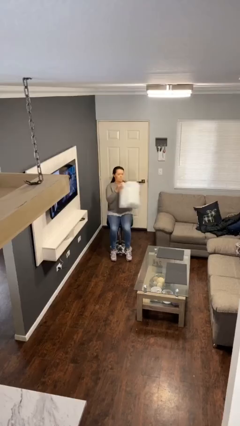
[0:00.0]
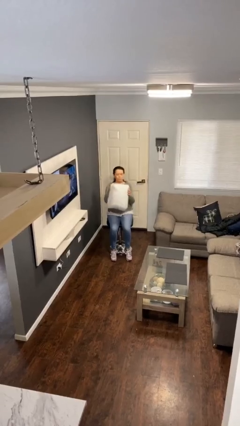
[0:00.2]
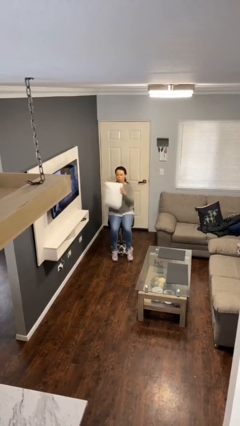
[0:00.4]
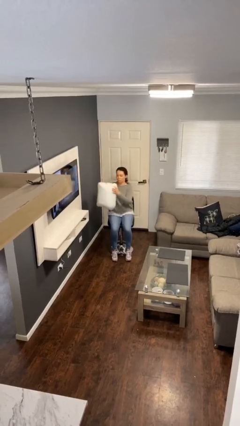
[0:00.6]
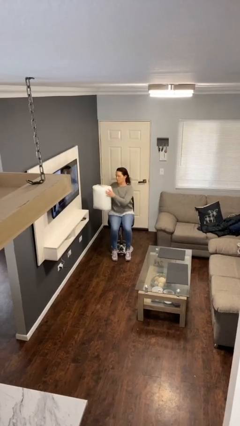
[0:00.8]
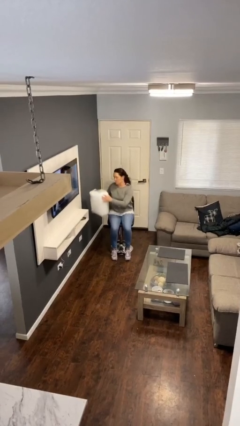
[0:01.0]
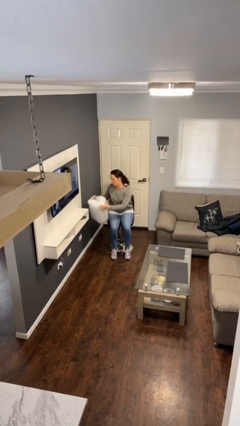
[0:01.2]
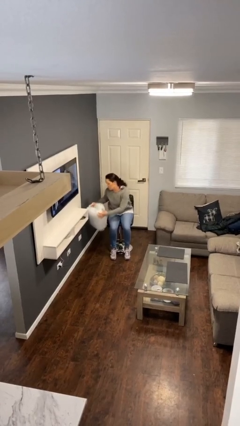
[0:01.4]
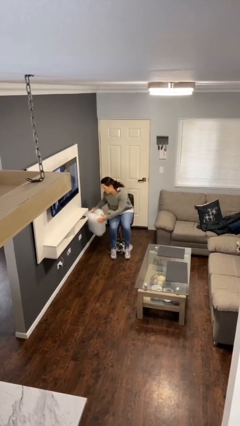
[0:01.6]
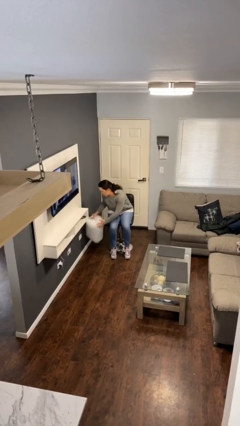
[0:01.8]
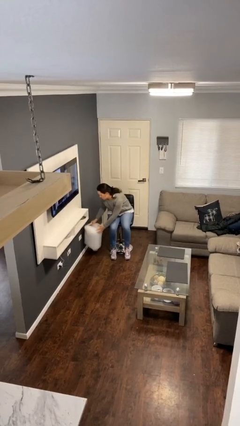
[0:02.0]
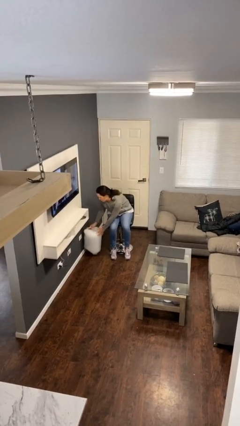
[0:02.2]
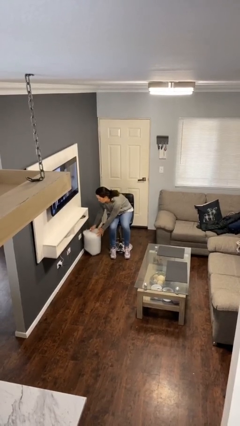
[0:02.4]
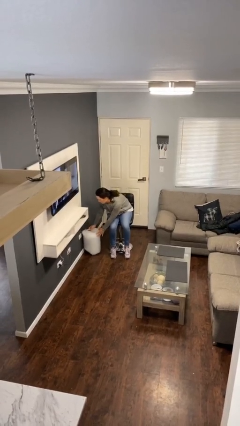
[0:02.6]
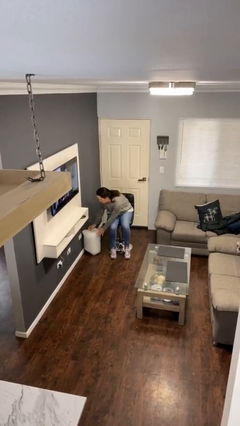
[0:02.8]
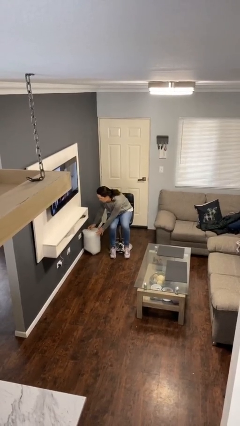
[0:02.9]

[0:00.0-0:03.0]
person puts down object on floor

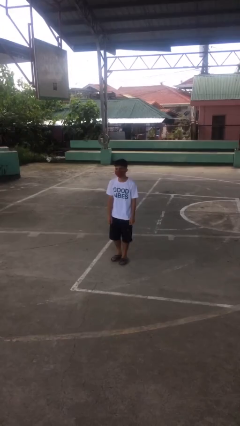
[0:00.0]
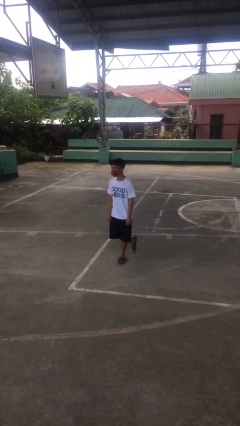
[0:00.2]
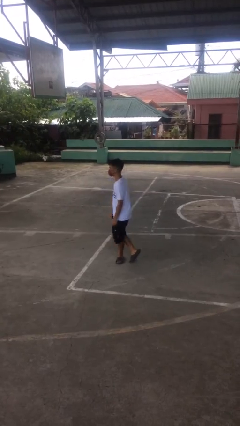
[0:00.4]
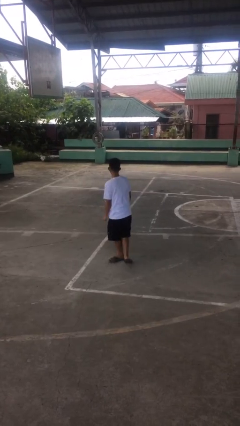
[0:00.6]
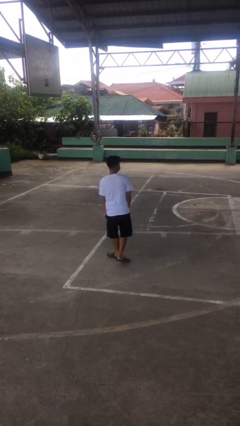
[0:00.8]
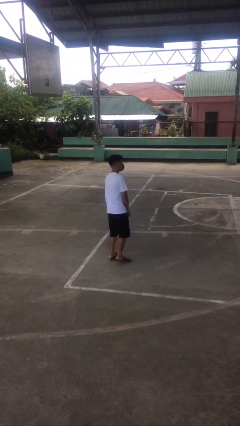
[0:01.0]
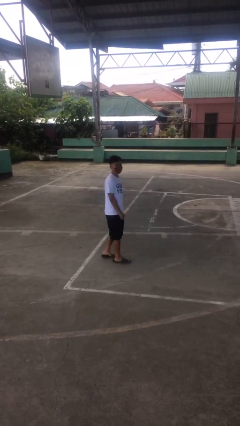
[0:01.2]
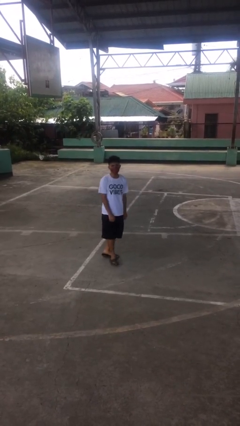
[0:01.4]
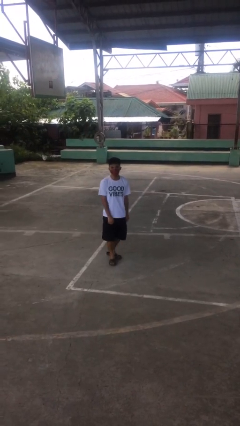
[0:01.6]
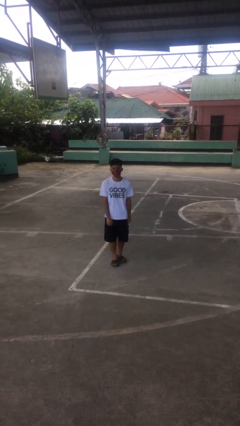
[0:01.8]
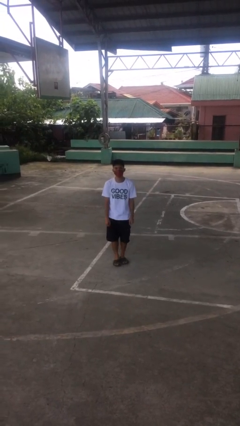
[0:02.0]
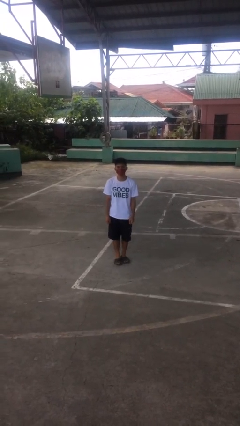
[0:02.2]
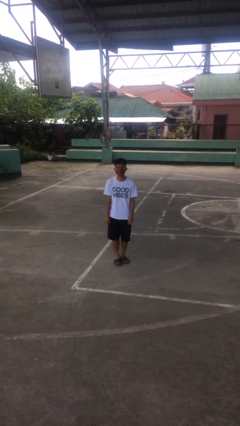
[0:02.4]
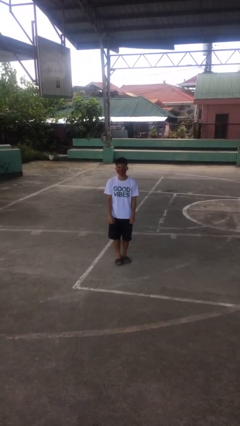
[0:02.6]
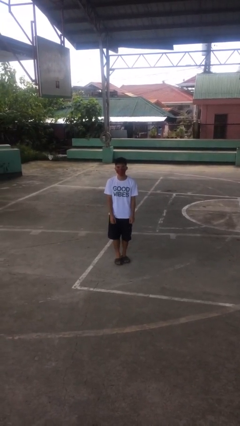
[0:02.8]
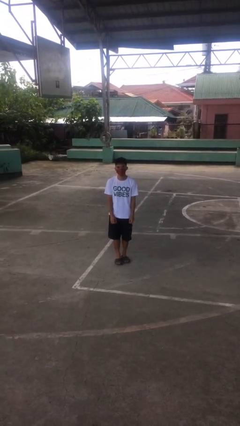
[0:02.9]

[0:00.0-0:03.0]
person twirls

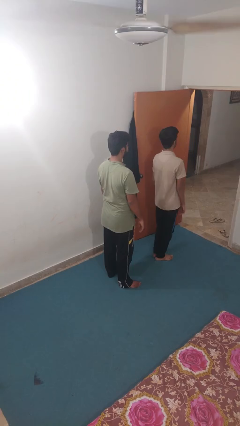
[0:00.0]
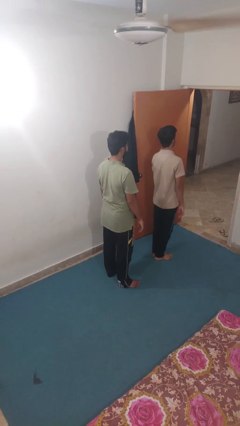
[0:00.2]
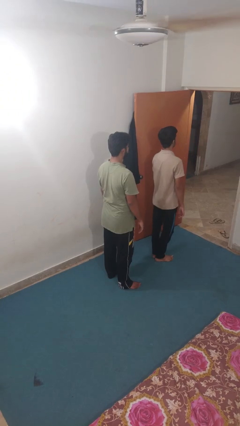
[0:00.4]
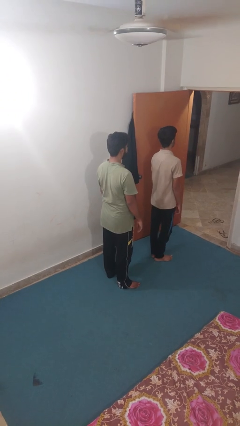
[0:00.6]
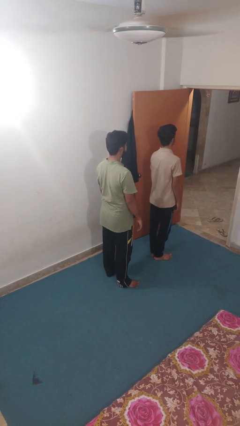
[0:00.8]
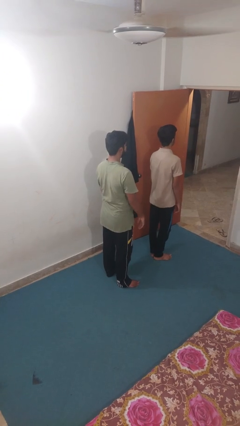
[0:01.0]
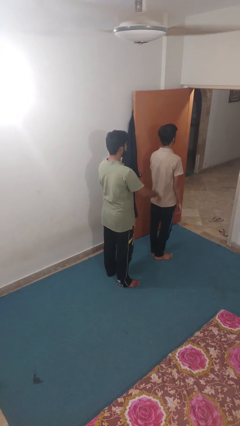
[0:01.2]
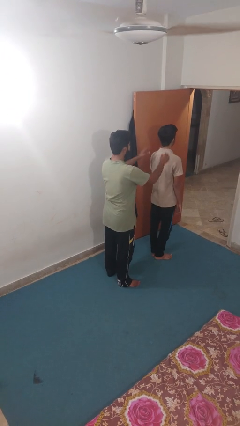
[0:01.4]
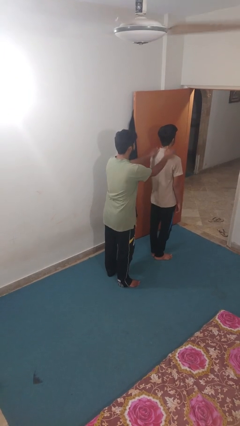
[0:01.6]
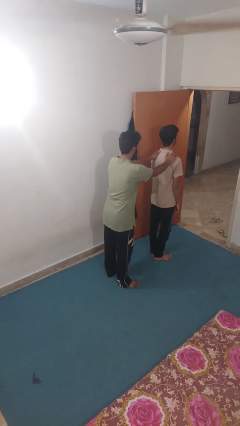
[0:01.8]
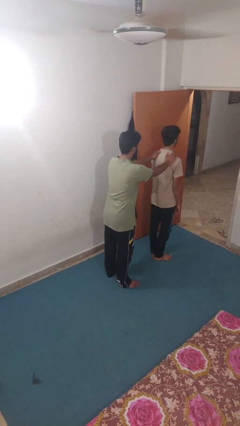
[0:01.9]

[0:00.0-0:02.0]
person grabs person by shoulder

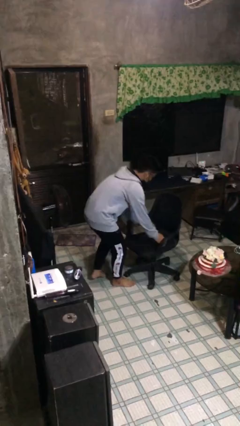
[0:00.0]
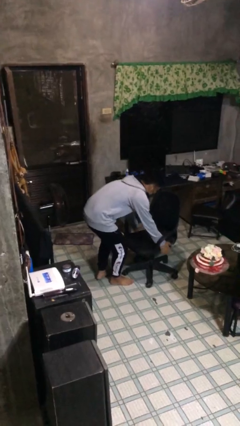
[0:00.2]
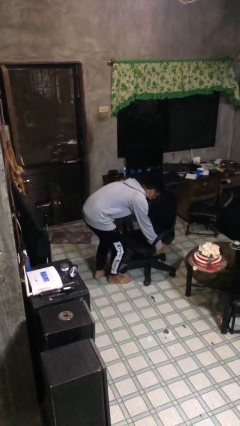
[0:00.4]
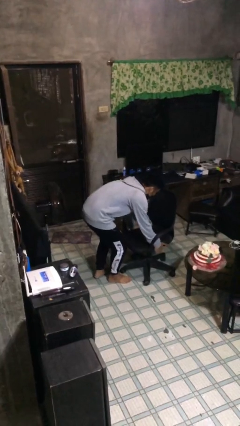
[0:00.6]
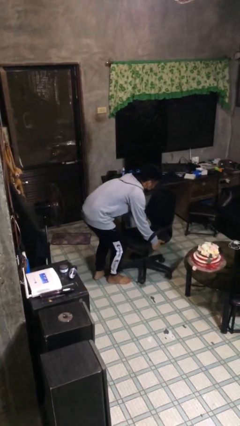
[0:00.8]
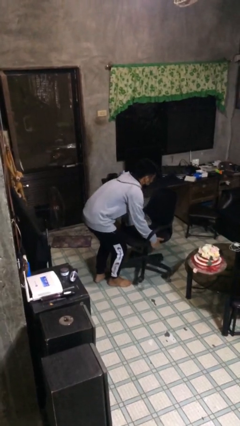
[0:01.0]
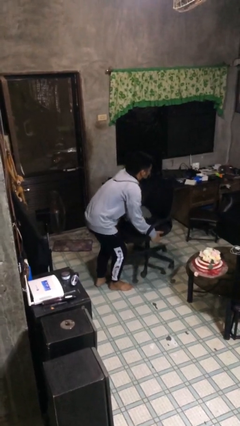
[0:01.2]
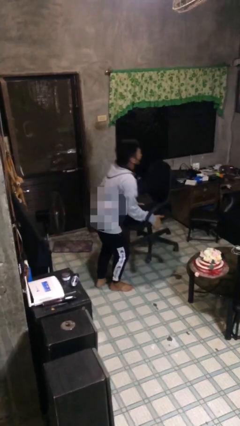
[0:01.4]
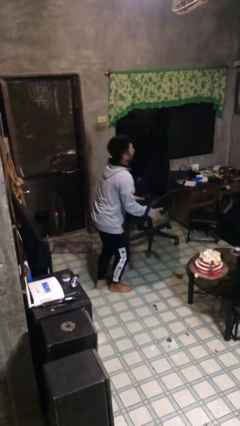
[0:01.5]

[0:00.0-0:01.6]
person picks up object from floor

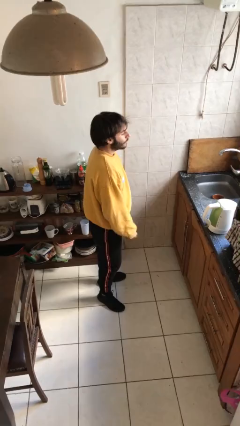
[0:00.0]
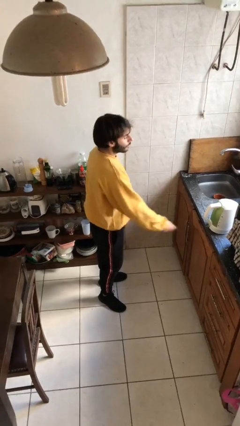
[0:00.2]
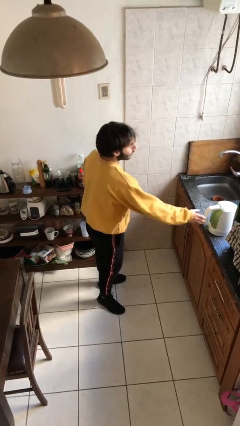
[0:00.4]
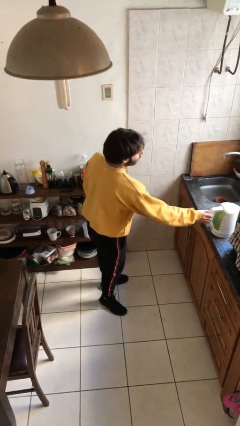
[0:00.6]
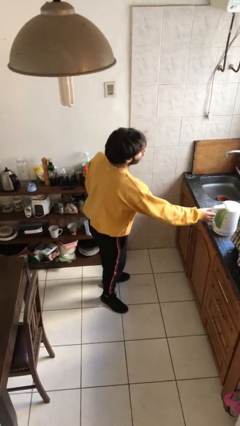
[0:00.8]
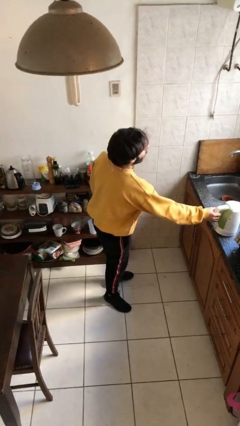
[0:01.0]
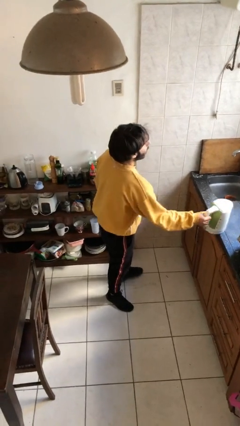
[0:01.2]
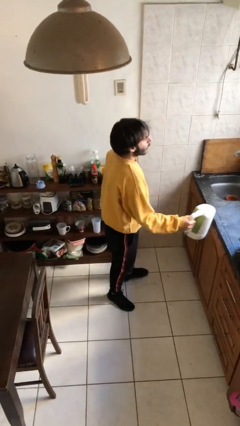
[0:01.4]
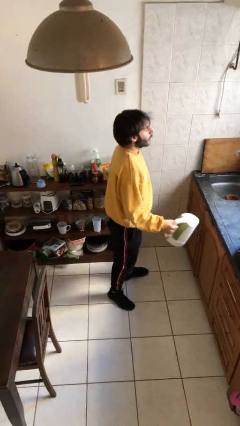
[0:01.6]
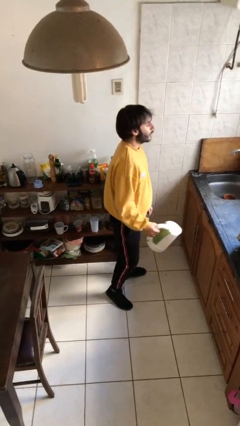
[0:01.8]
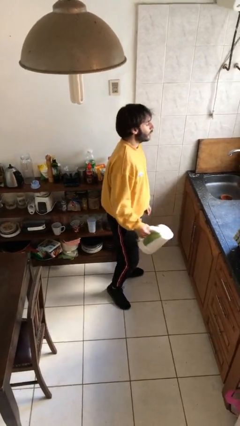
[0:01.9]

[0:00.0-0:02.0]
person picks up object from countertop

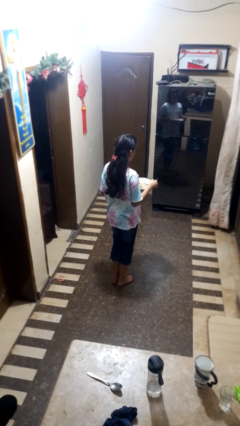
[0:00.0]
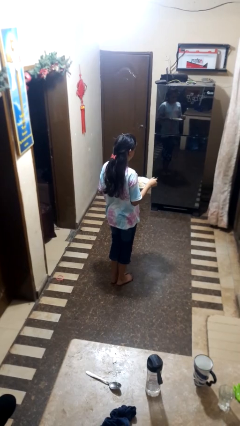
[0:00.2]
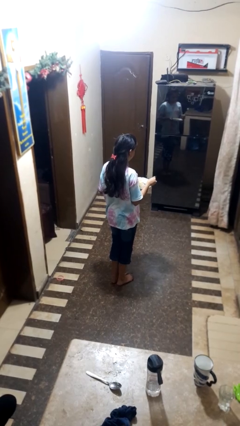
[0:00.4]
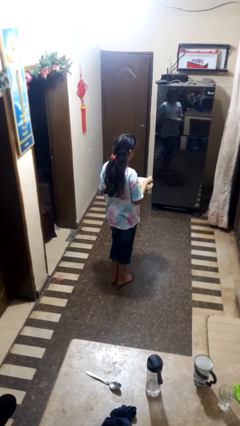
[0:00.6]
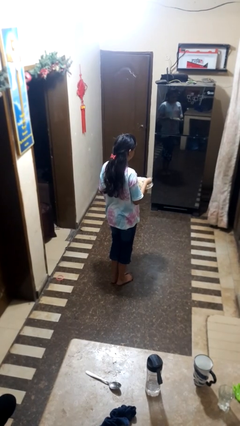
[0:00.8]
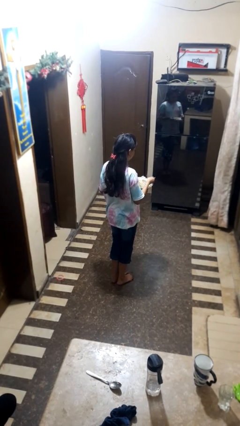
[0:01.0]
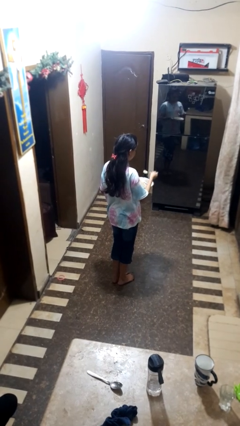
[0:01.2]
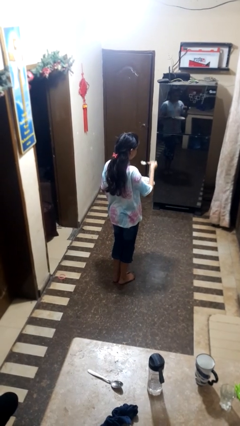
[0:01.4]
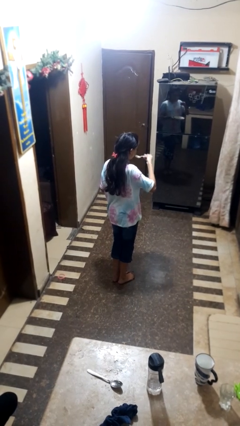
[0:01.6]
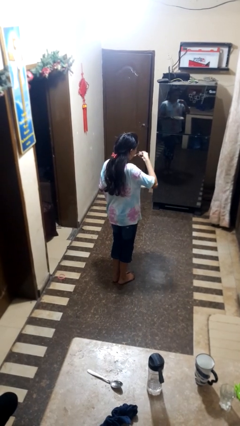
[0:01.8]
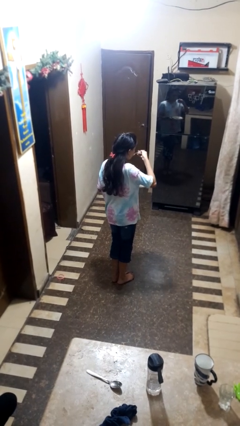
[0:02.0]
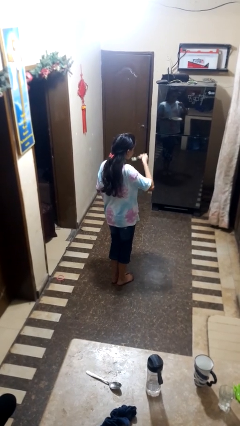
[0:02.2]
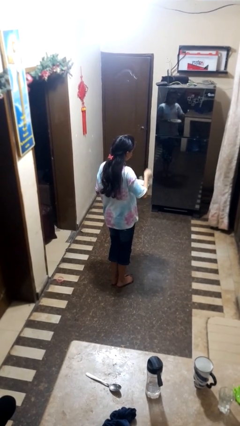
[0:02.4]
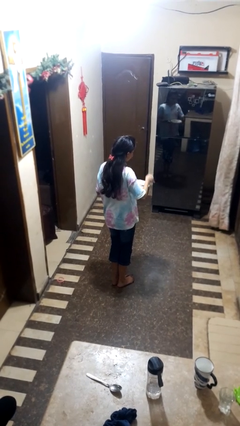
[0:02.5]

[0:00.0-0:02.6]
person eats with utensil

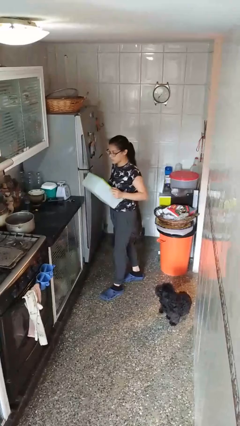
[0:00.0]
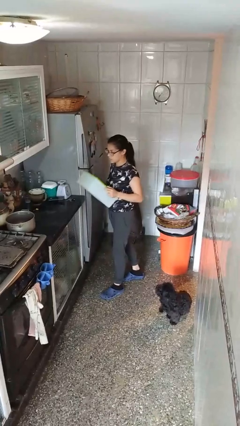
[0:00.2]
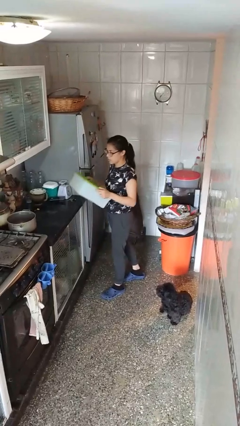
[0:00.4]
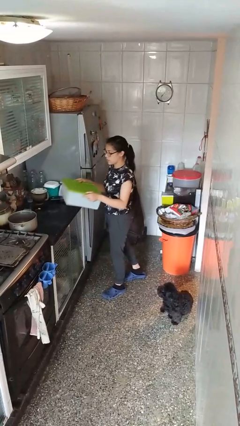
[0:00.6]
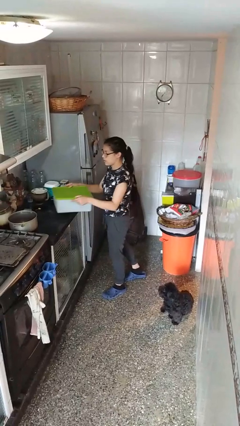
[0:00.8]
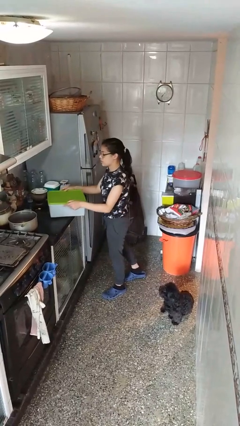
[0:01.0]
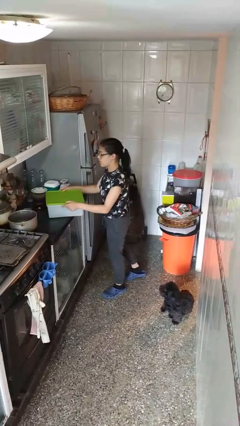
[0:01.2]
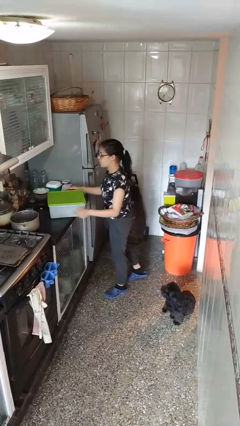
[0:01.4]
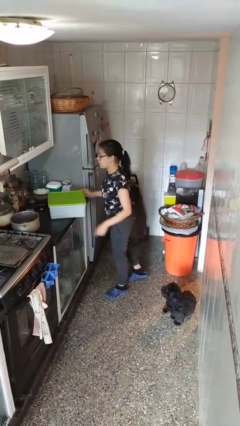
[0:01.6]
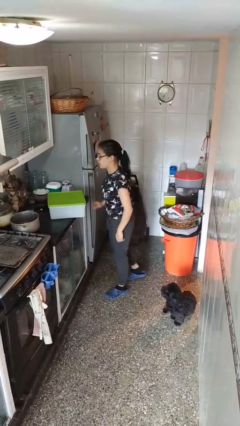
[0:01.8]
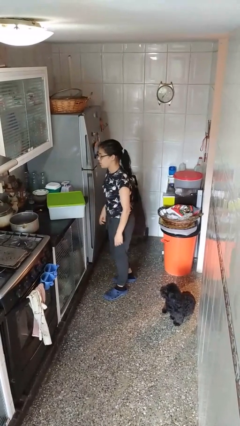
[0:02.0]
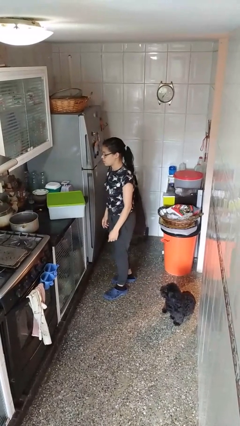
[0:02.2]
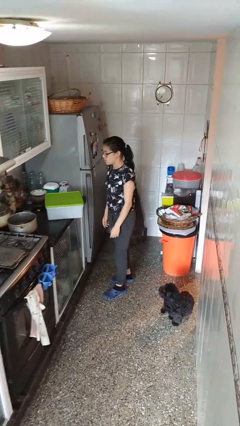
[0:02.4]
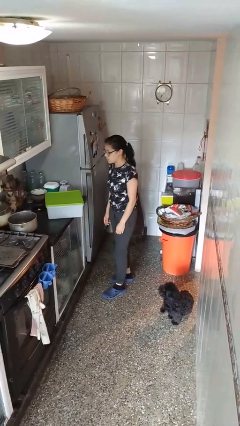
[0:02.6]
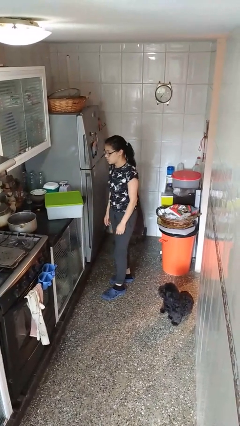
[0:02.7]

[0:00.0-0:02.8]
person puts down object on countertop
